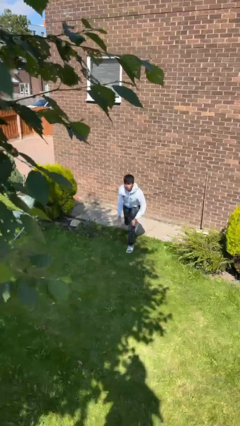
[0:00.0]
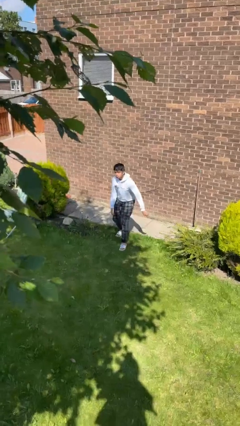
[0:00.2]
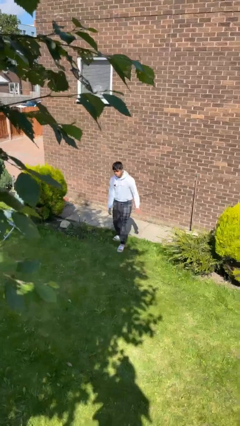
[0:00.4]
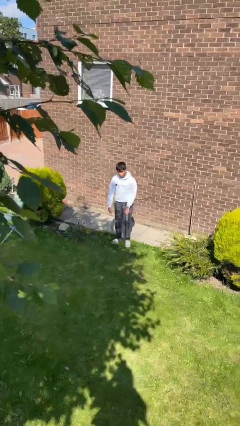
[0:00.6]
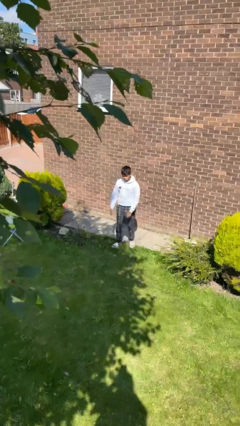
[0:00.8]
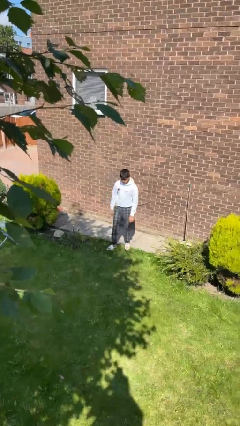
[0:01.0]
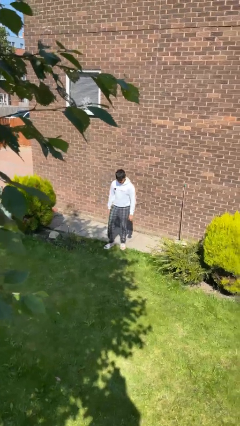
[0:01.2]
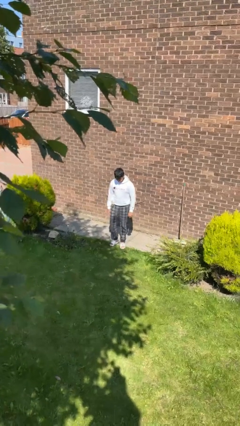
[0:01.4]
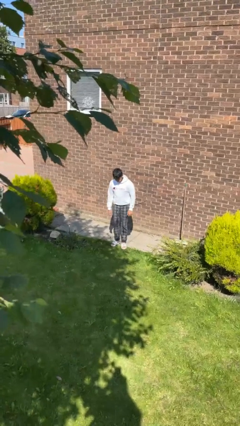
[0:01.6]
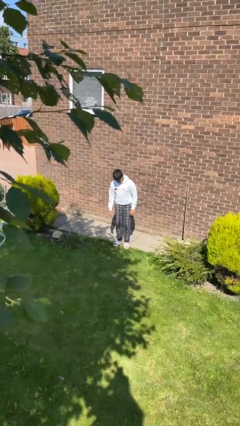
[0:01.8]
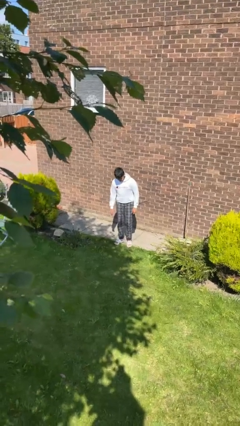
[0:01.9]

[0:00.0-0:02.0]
person stands up from floor

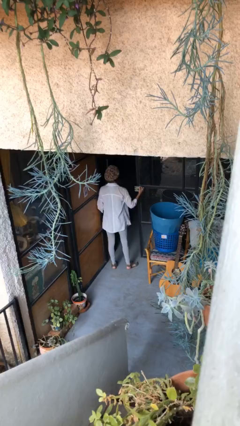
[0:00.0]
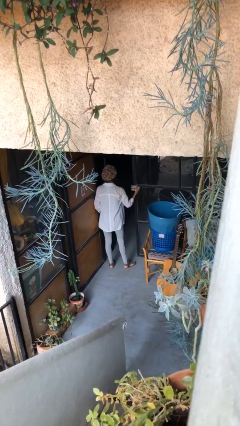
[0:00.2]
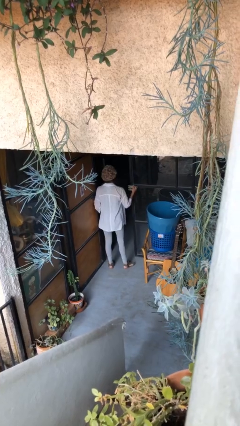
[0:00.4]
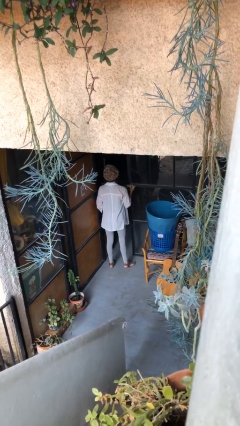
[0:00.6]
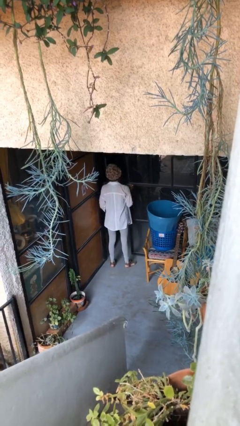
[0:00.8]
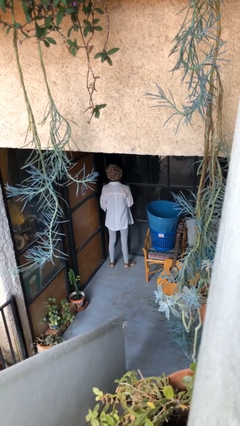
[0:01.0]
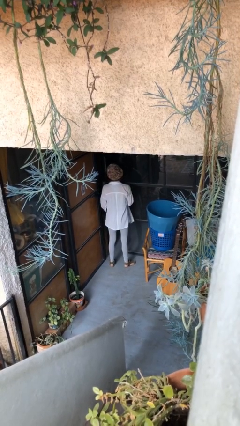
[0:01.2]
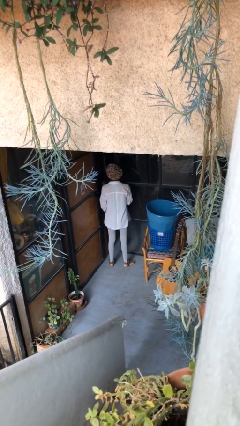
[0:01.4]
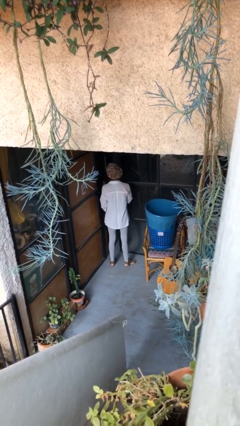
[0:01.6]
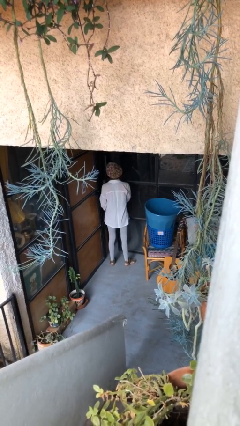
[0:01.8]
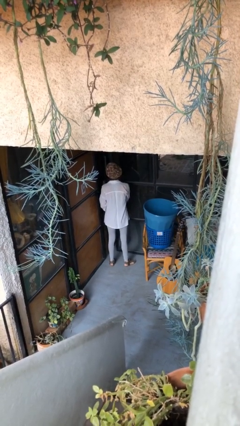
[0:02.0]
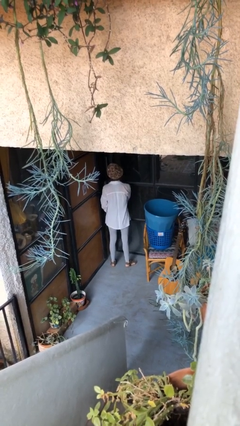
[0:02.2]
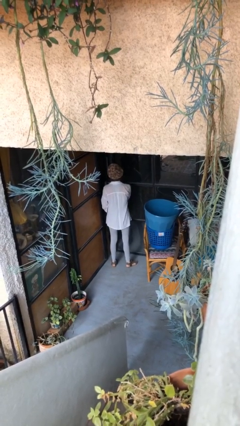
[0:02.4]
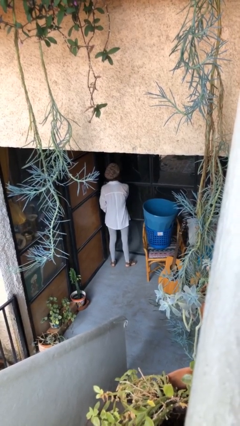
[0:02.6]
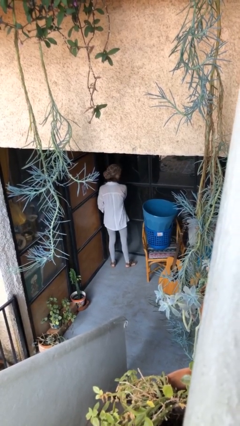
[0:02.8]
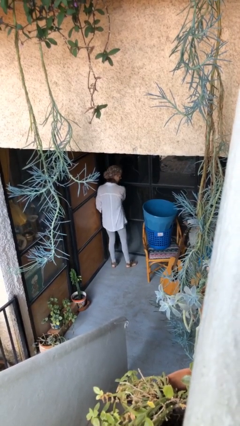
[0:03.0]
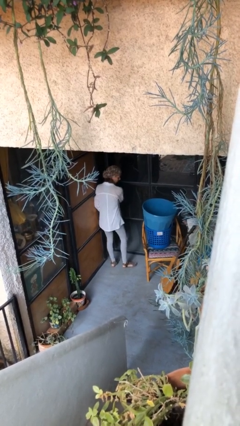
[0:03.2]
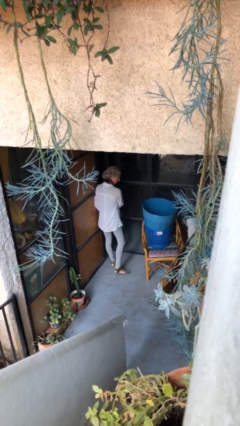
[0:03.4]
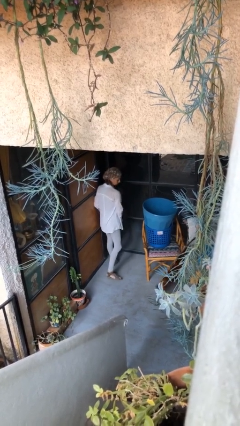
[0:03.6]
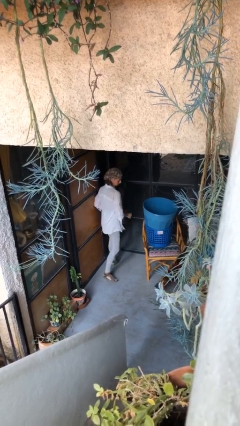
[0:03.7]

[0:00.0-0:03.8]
person closes facility door

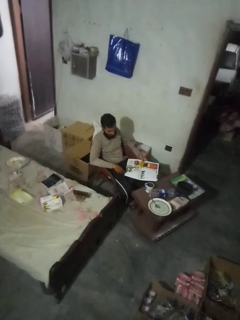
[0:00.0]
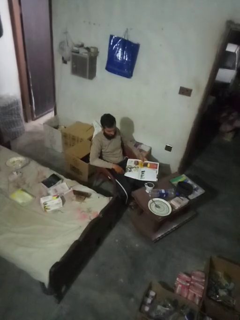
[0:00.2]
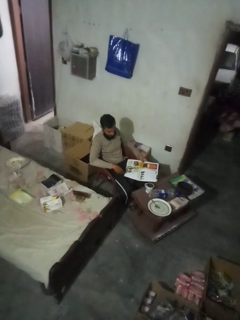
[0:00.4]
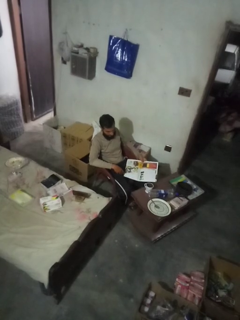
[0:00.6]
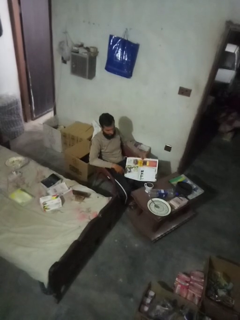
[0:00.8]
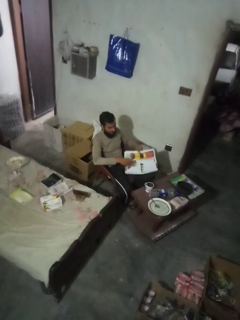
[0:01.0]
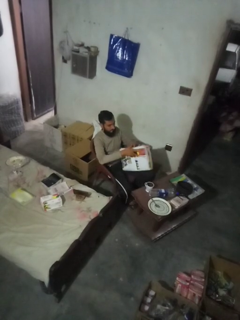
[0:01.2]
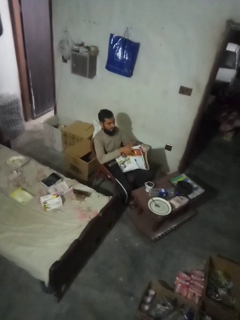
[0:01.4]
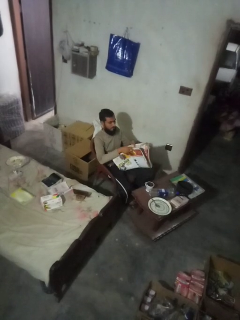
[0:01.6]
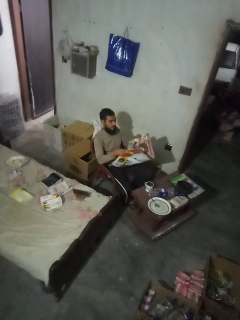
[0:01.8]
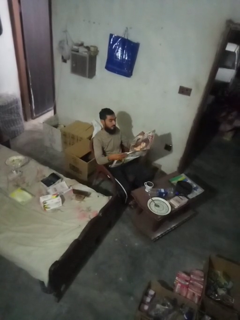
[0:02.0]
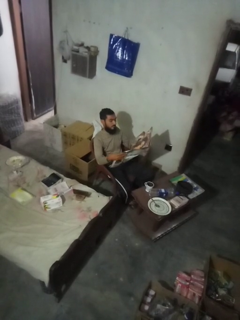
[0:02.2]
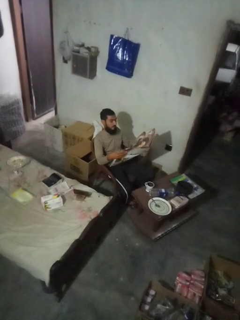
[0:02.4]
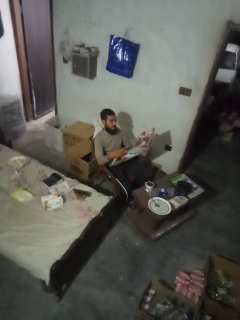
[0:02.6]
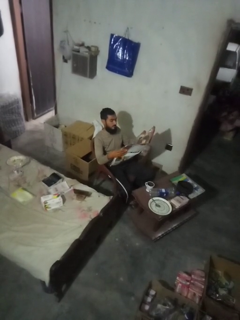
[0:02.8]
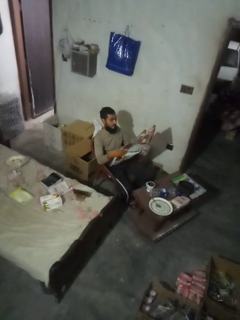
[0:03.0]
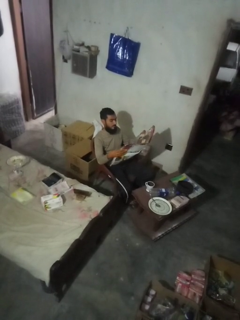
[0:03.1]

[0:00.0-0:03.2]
person reads newspaper

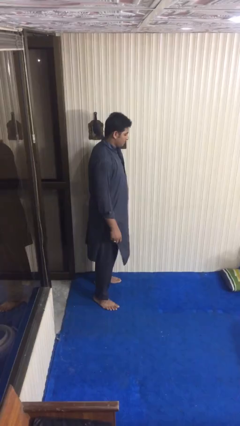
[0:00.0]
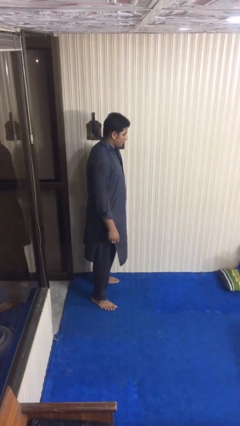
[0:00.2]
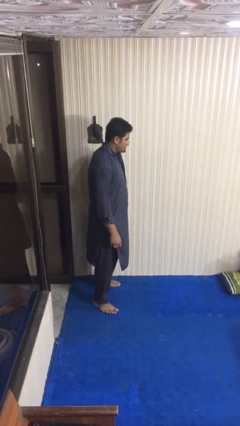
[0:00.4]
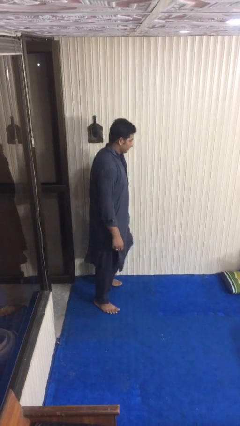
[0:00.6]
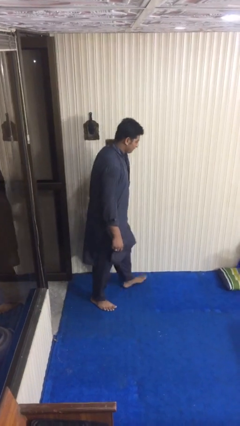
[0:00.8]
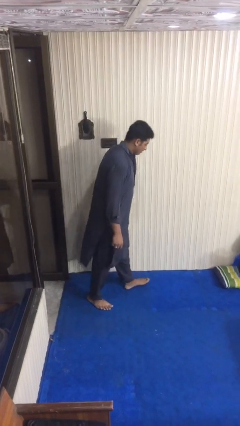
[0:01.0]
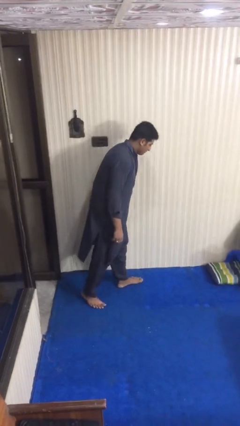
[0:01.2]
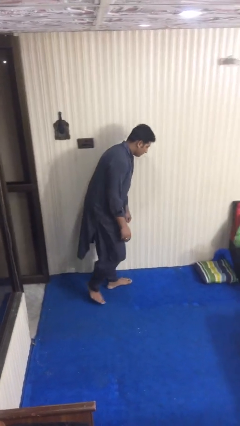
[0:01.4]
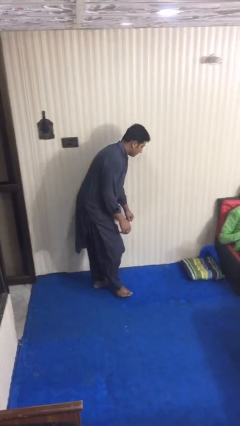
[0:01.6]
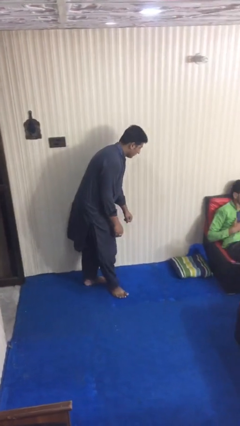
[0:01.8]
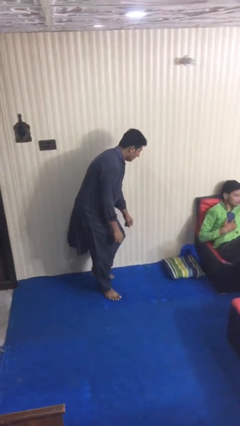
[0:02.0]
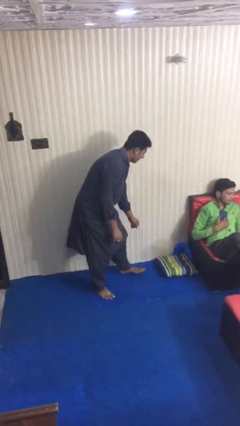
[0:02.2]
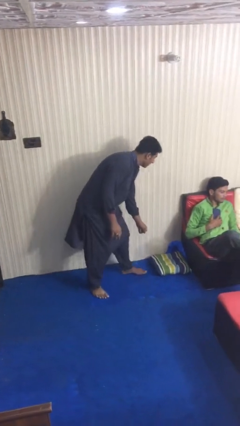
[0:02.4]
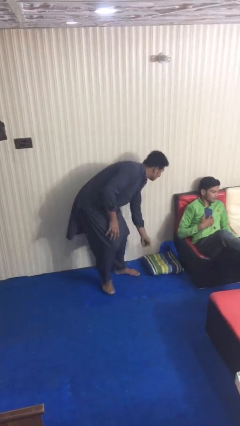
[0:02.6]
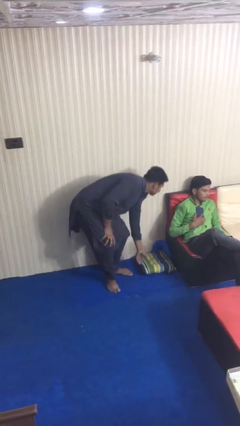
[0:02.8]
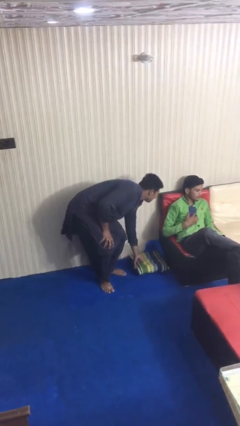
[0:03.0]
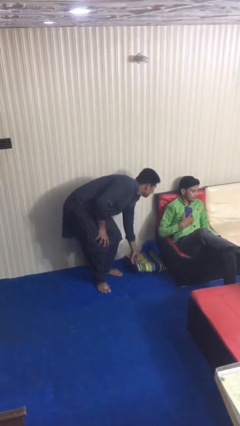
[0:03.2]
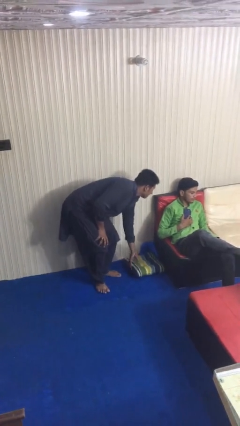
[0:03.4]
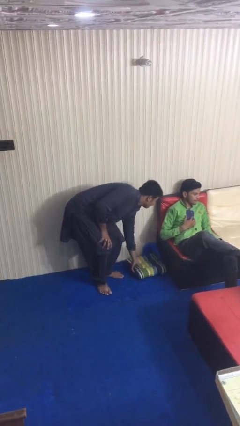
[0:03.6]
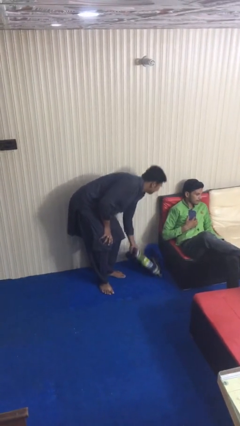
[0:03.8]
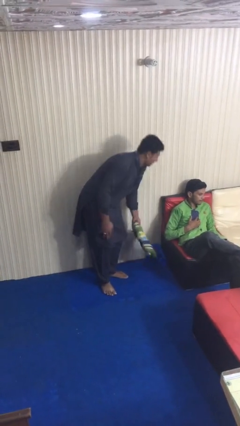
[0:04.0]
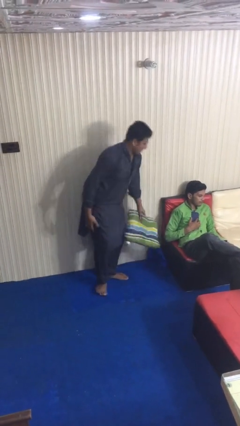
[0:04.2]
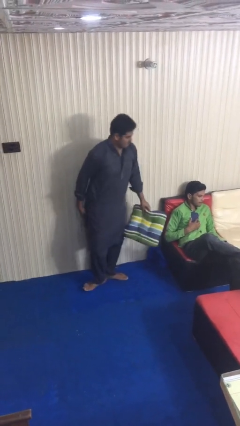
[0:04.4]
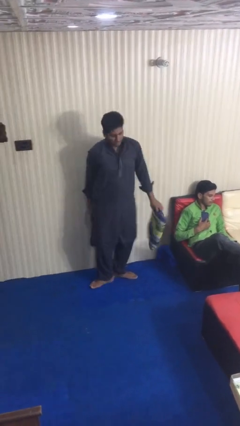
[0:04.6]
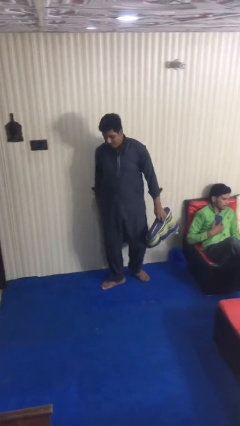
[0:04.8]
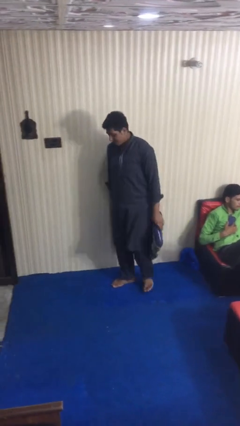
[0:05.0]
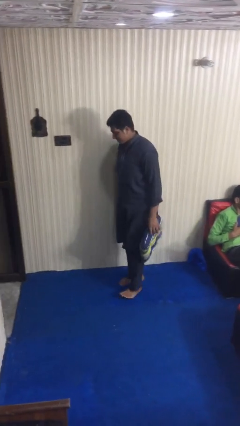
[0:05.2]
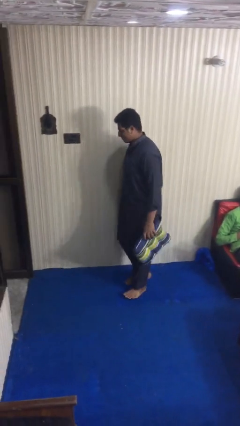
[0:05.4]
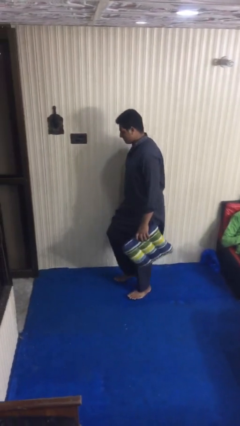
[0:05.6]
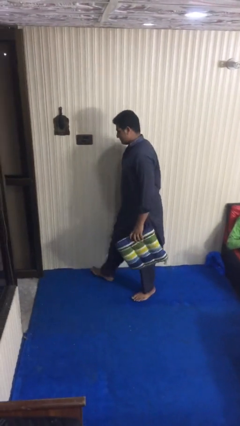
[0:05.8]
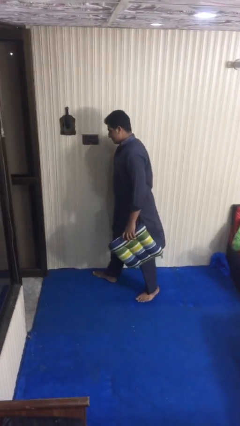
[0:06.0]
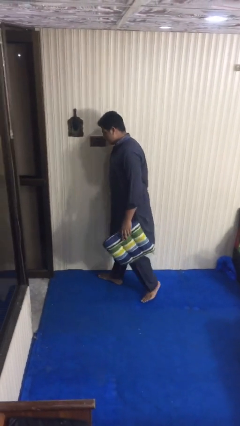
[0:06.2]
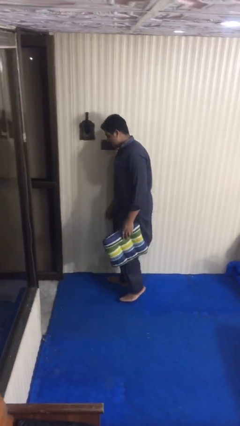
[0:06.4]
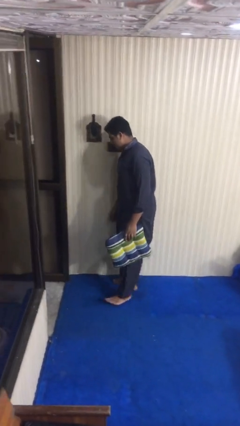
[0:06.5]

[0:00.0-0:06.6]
person steals object from person

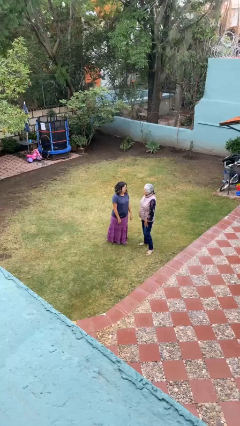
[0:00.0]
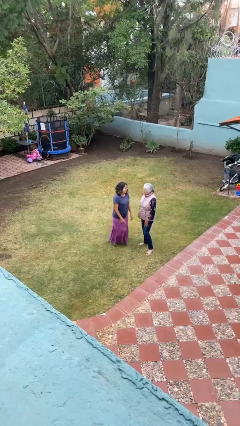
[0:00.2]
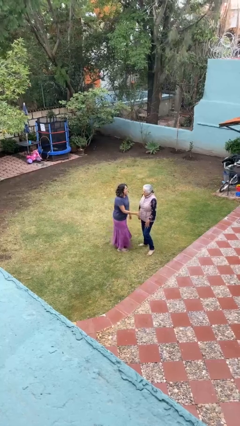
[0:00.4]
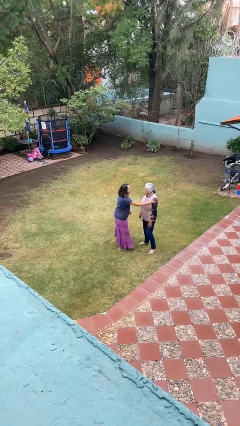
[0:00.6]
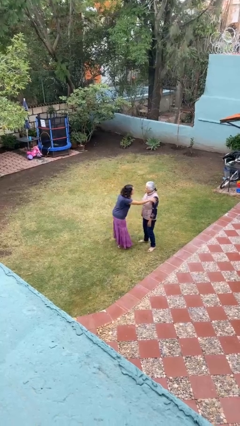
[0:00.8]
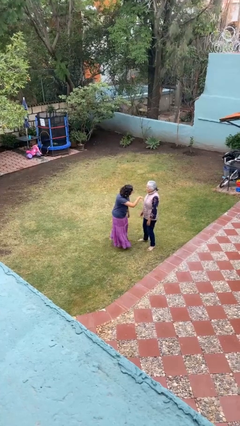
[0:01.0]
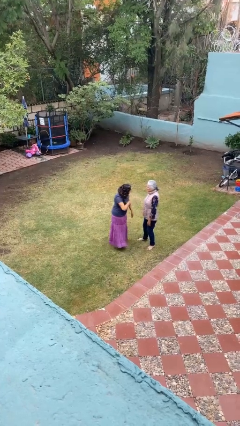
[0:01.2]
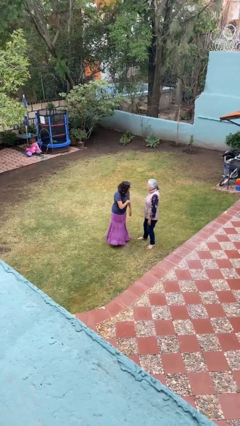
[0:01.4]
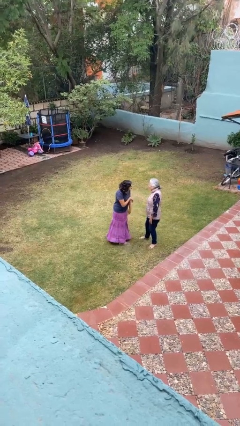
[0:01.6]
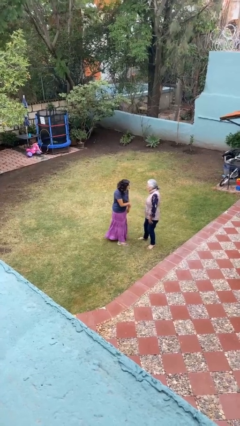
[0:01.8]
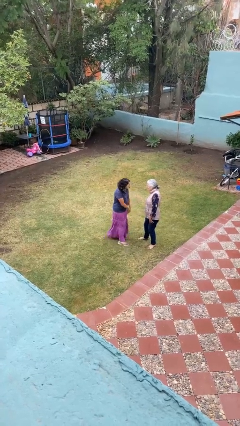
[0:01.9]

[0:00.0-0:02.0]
person shoves person

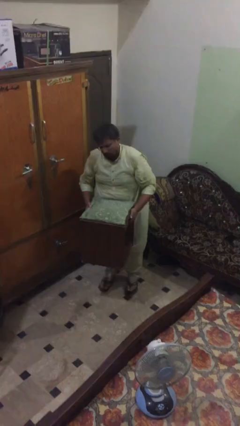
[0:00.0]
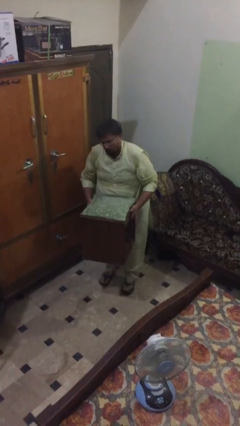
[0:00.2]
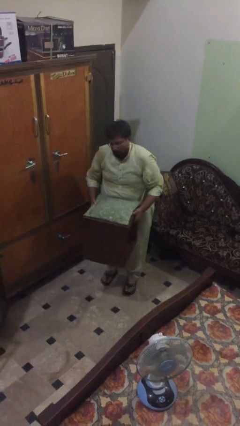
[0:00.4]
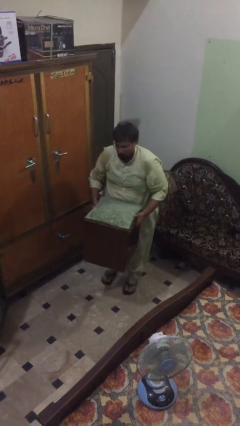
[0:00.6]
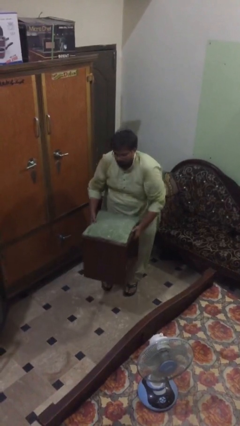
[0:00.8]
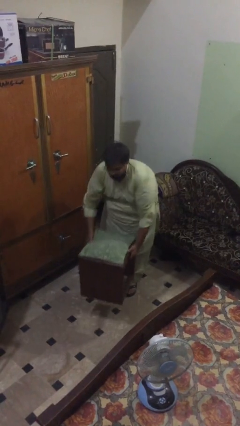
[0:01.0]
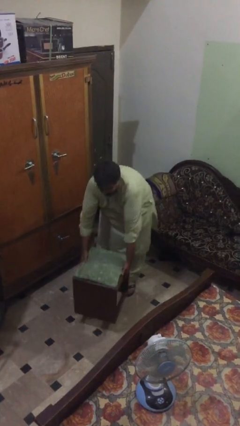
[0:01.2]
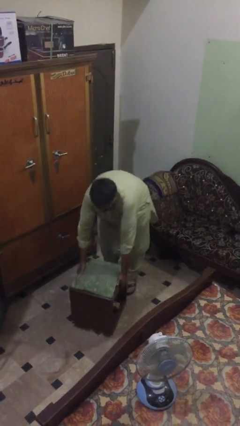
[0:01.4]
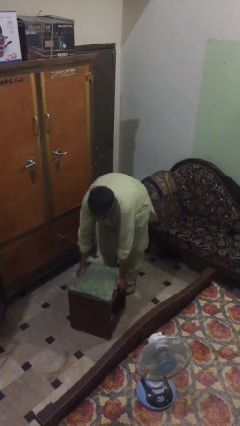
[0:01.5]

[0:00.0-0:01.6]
person puts down object on floor
